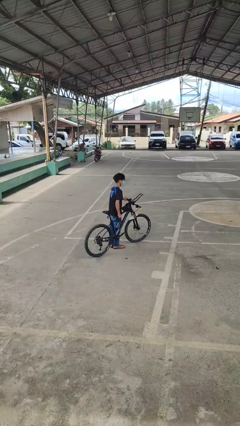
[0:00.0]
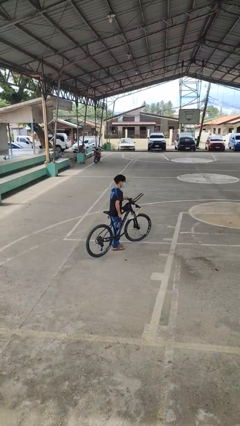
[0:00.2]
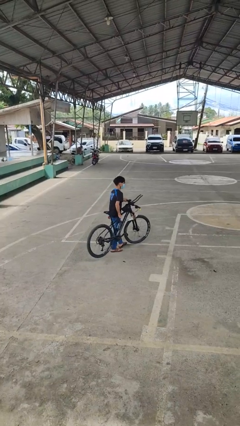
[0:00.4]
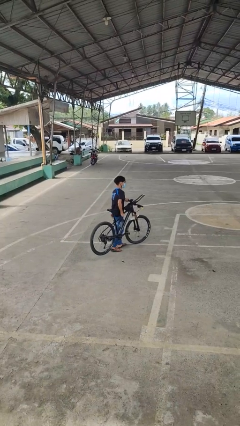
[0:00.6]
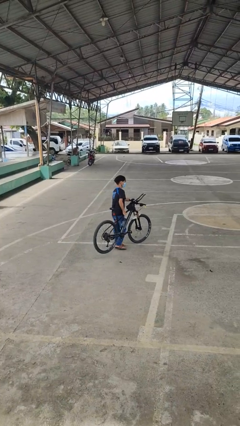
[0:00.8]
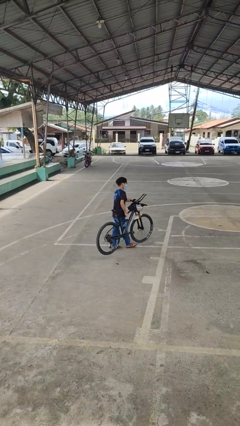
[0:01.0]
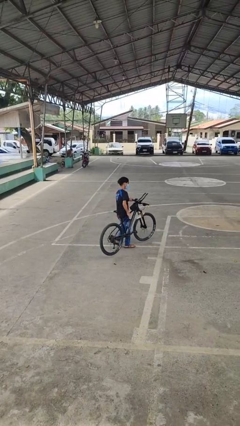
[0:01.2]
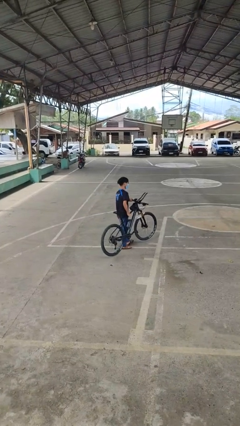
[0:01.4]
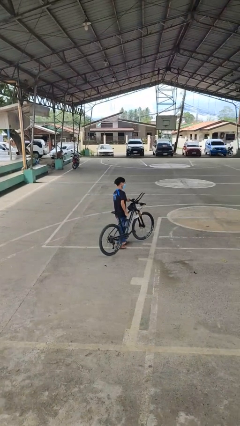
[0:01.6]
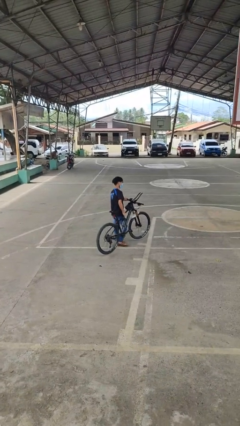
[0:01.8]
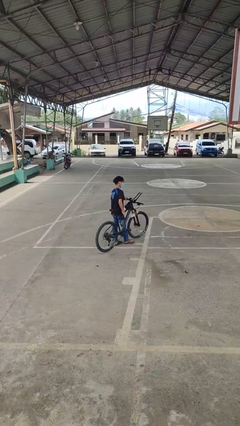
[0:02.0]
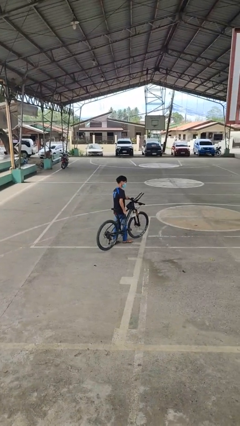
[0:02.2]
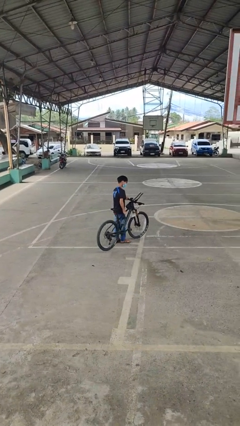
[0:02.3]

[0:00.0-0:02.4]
person carries bicycle

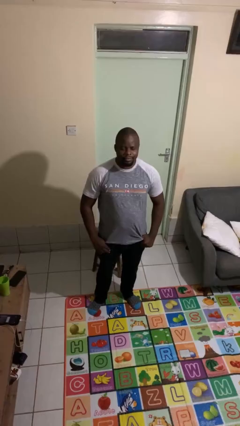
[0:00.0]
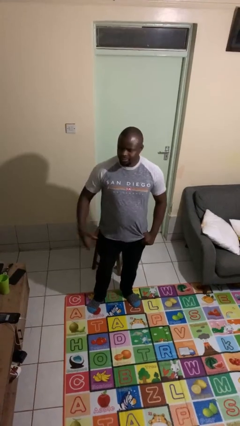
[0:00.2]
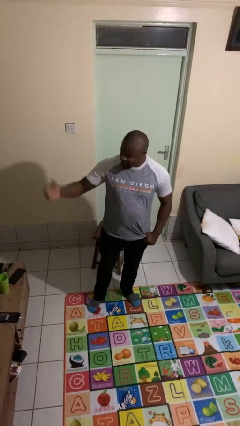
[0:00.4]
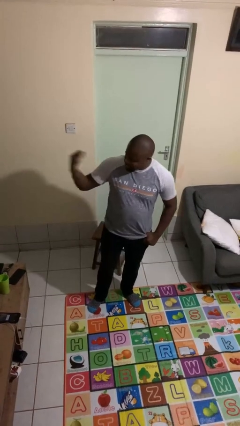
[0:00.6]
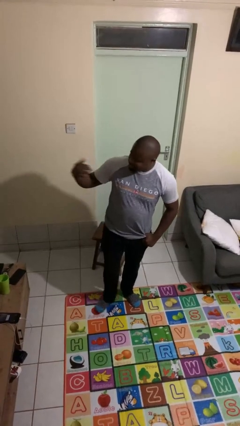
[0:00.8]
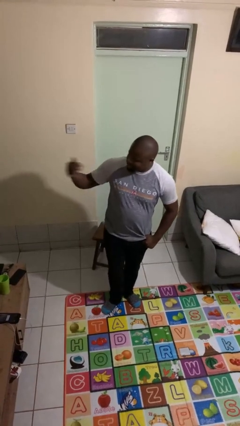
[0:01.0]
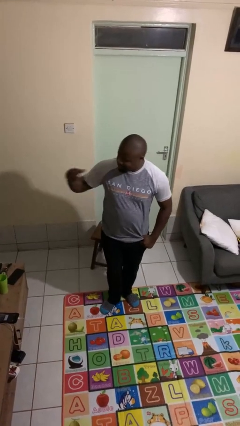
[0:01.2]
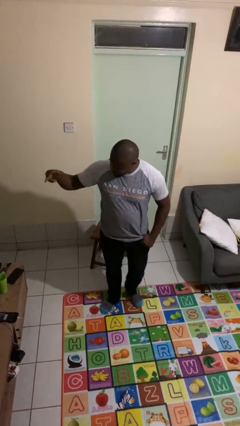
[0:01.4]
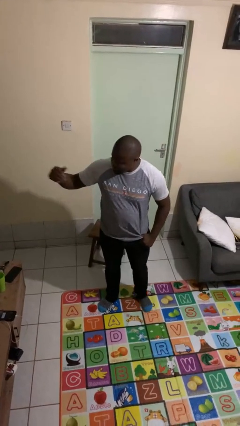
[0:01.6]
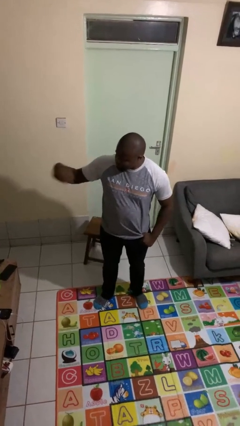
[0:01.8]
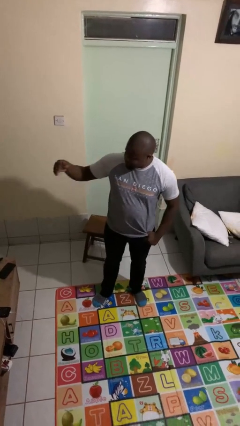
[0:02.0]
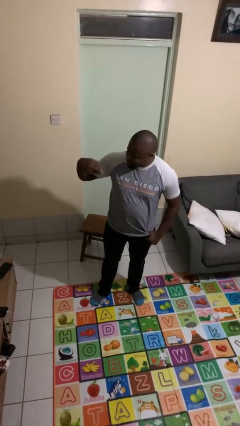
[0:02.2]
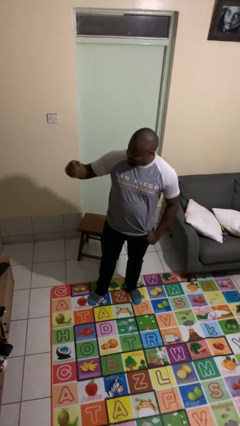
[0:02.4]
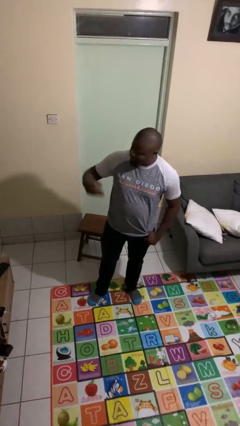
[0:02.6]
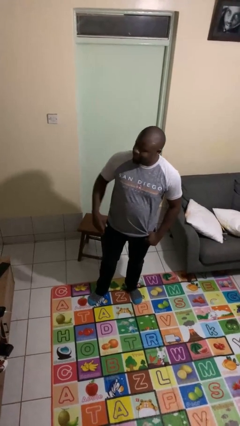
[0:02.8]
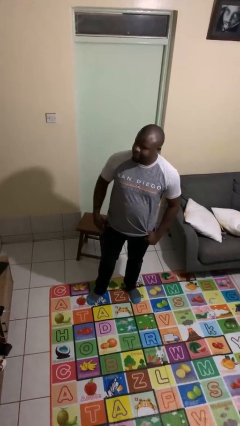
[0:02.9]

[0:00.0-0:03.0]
person gestures come here

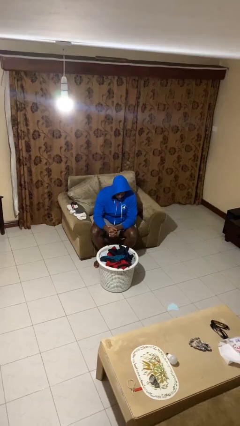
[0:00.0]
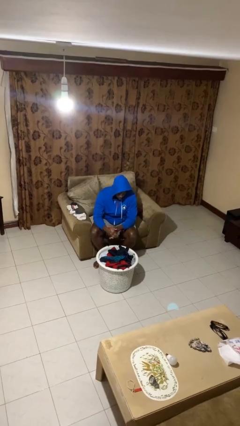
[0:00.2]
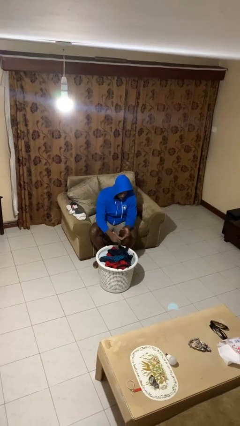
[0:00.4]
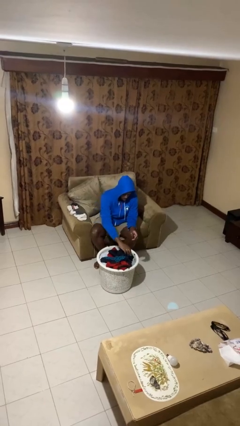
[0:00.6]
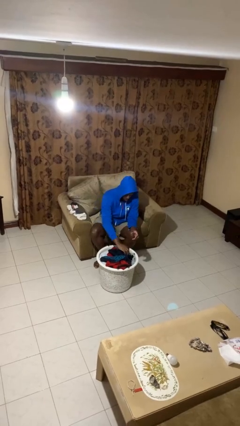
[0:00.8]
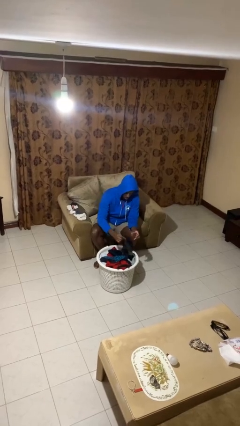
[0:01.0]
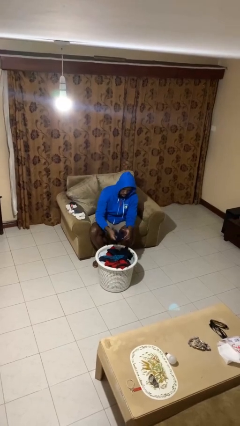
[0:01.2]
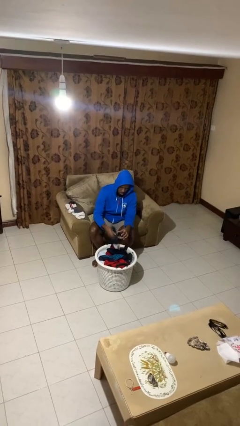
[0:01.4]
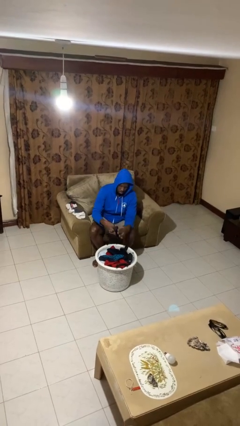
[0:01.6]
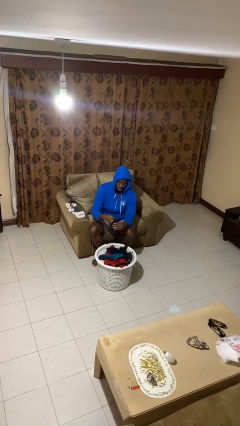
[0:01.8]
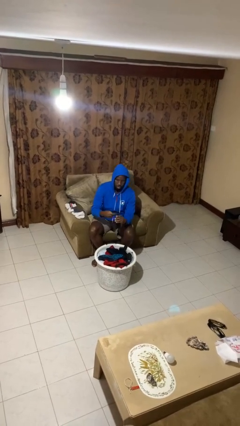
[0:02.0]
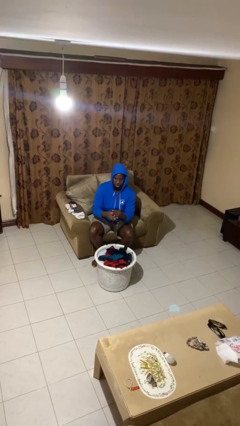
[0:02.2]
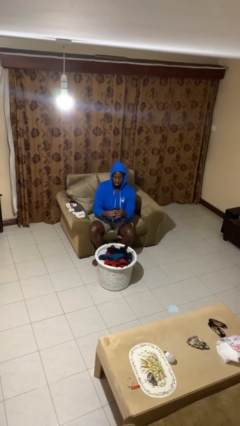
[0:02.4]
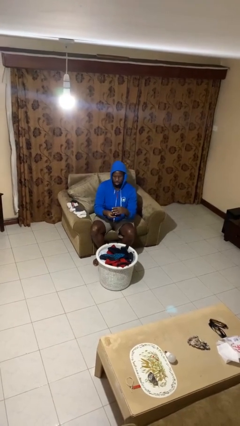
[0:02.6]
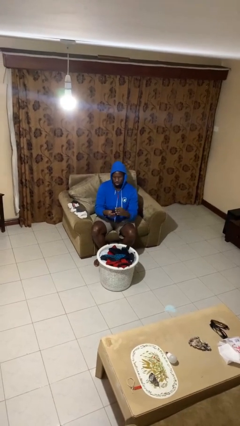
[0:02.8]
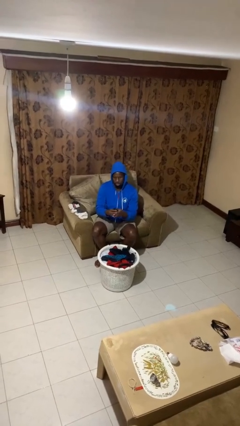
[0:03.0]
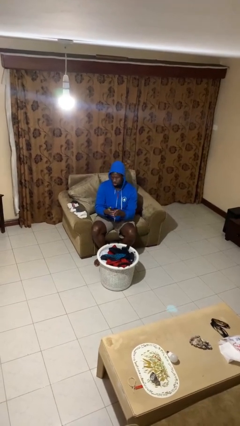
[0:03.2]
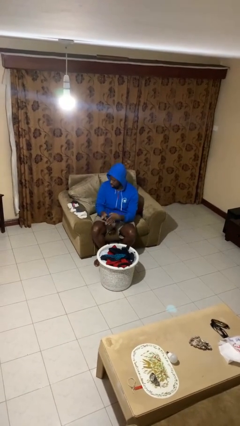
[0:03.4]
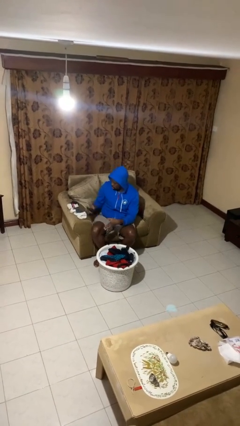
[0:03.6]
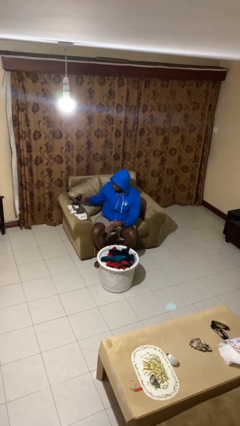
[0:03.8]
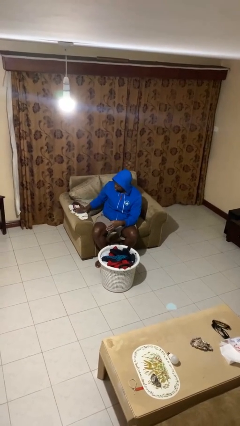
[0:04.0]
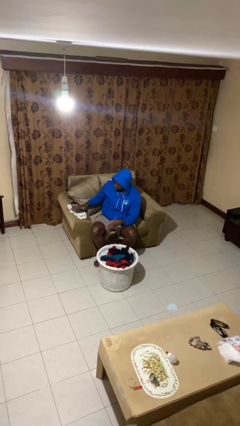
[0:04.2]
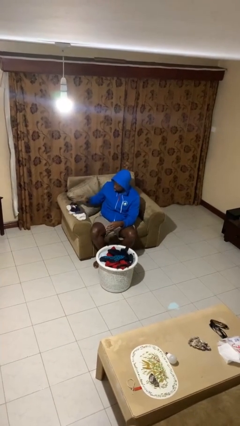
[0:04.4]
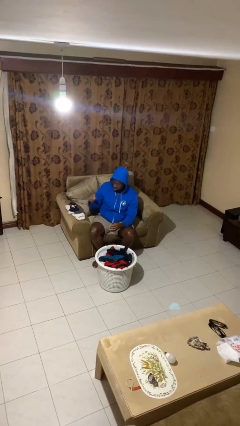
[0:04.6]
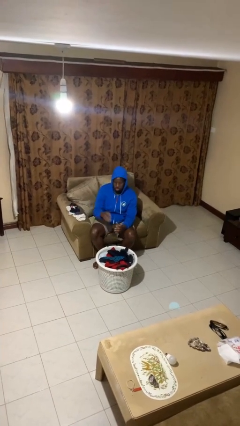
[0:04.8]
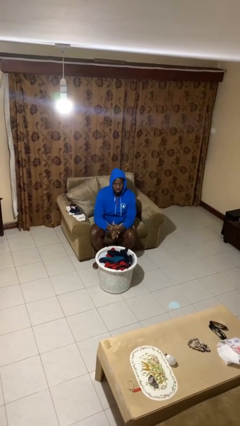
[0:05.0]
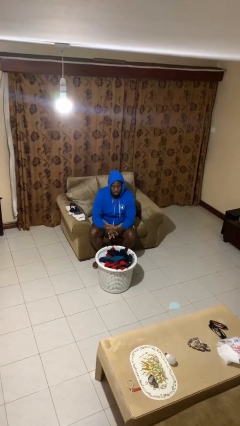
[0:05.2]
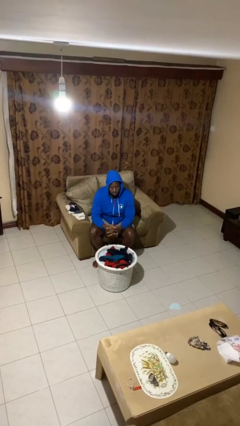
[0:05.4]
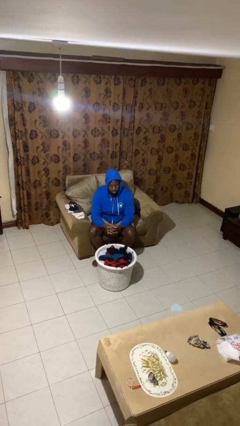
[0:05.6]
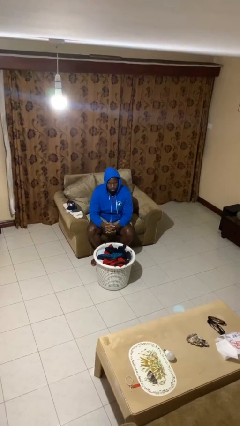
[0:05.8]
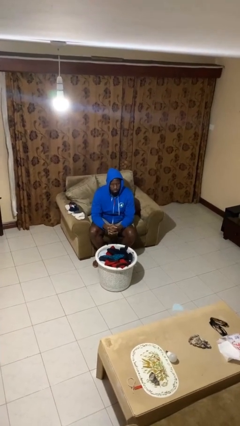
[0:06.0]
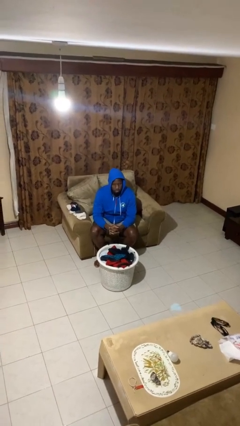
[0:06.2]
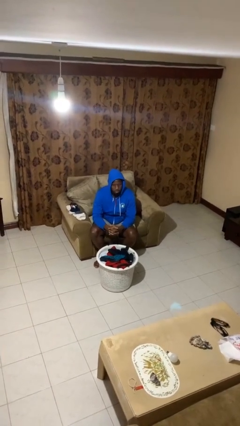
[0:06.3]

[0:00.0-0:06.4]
person folds socks

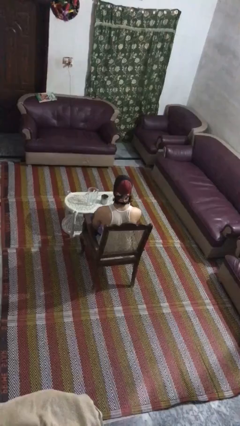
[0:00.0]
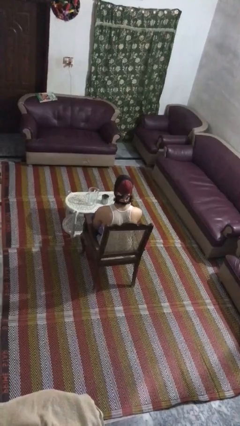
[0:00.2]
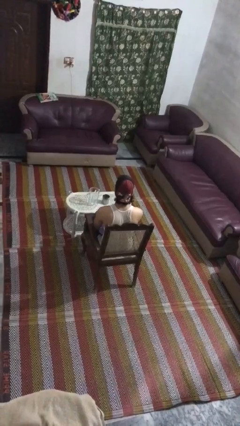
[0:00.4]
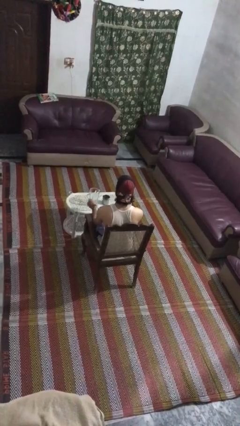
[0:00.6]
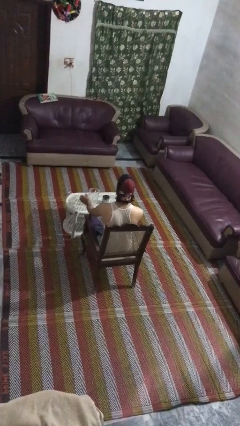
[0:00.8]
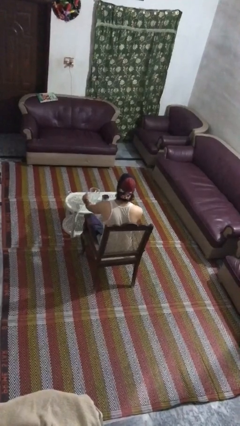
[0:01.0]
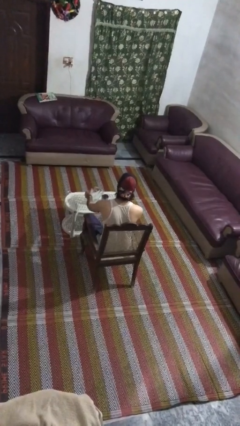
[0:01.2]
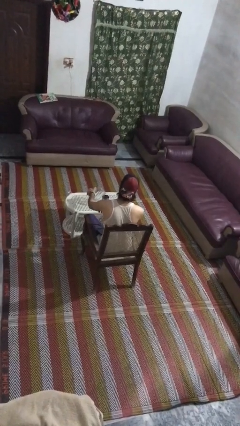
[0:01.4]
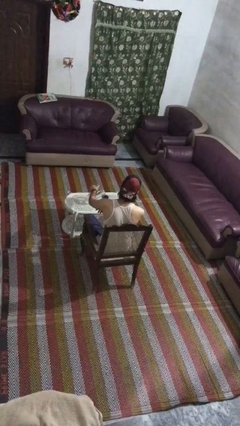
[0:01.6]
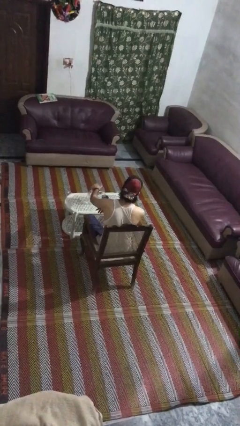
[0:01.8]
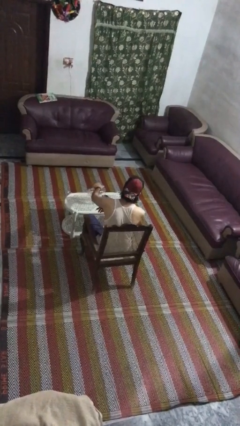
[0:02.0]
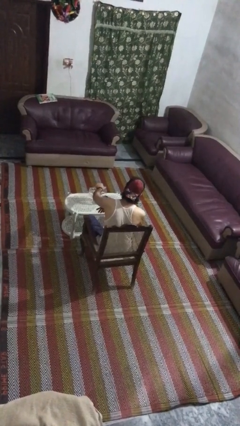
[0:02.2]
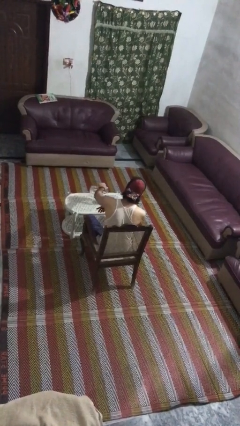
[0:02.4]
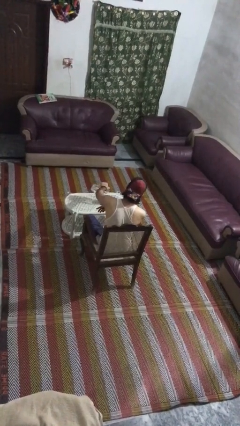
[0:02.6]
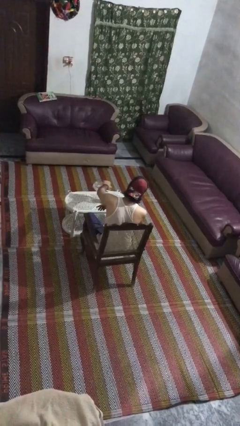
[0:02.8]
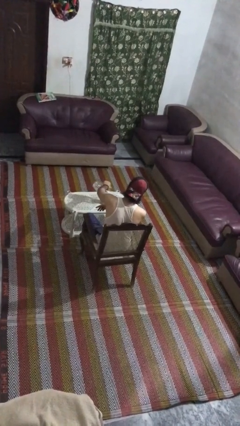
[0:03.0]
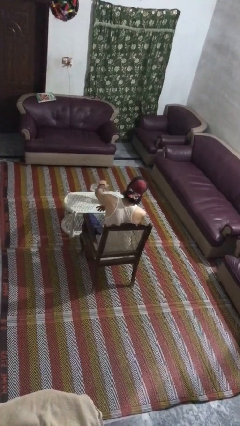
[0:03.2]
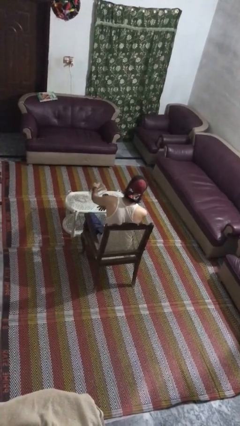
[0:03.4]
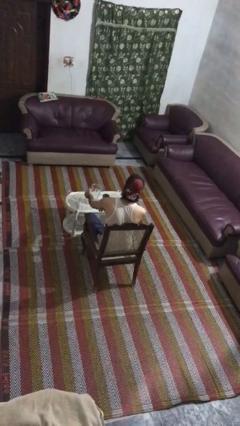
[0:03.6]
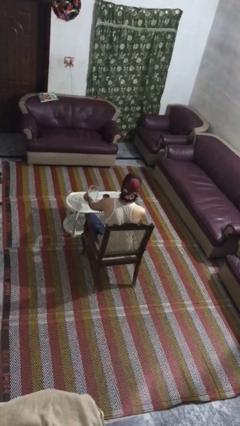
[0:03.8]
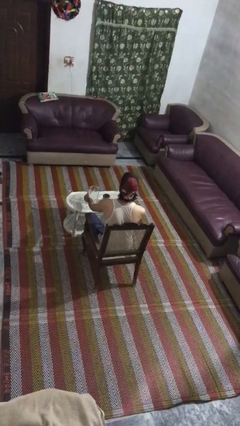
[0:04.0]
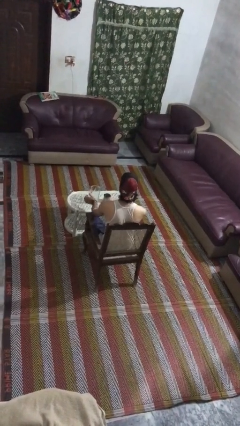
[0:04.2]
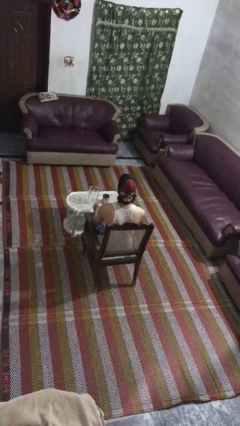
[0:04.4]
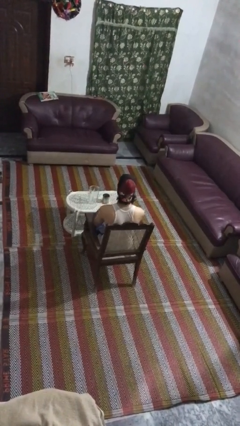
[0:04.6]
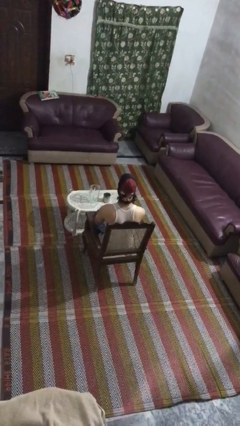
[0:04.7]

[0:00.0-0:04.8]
person pours coffee into mug

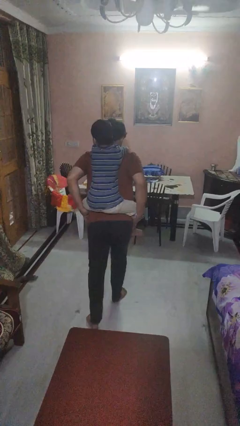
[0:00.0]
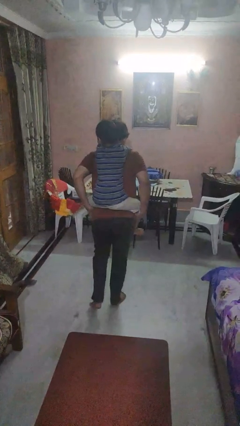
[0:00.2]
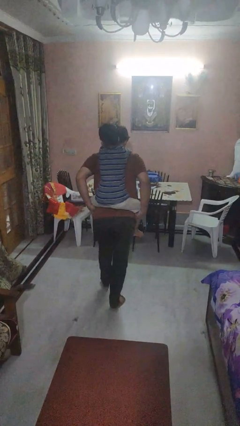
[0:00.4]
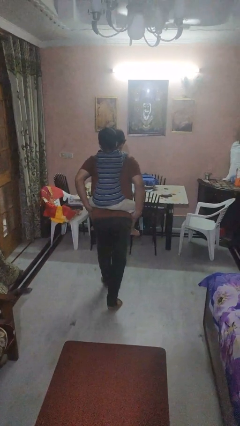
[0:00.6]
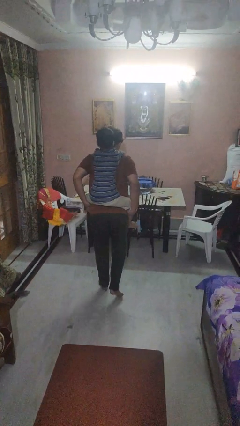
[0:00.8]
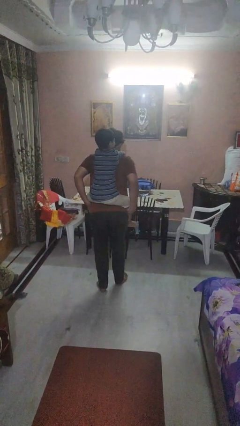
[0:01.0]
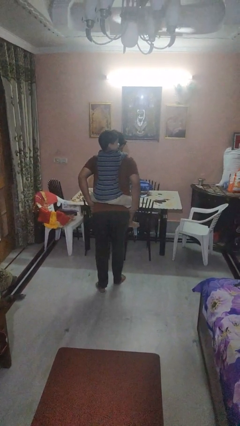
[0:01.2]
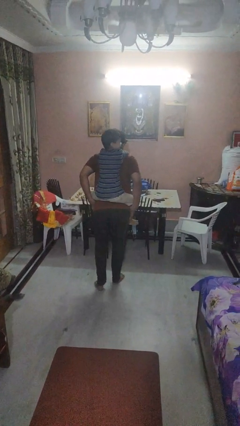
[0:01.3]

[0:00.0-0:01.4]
person carries person on back

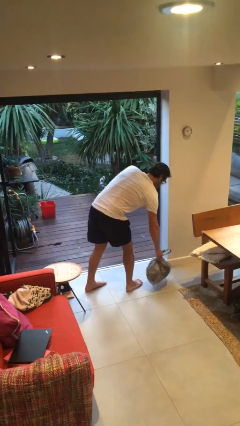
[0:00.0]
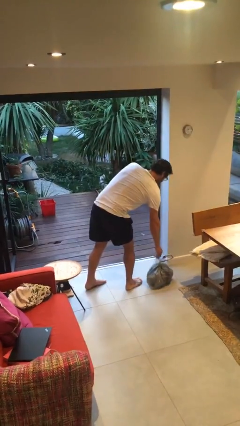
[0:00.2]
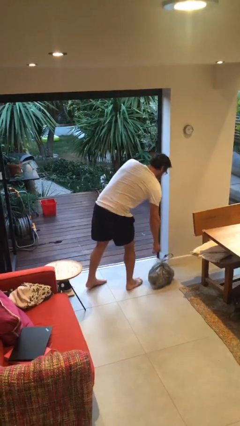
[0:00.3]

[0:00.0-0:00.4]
person puts down object on floor
